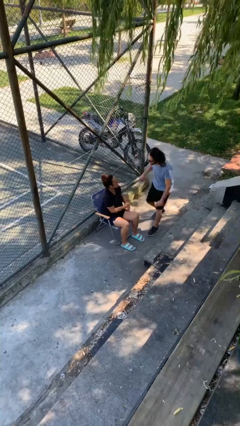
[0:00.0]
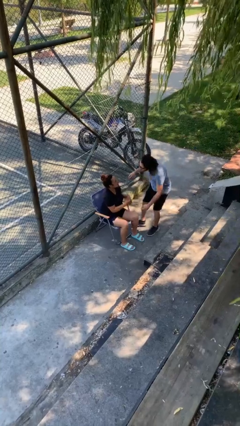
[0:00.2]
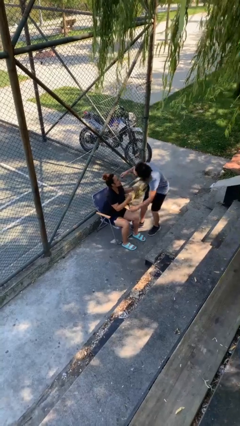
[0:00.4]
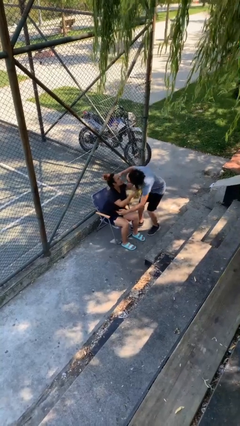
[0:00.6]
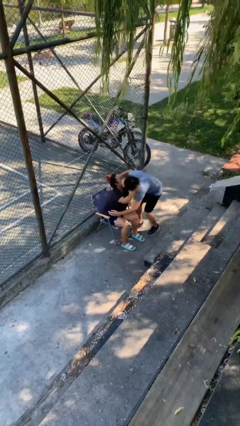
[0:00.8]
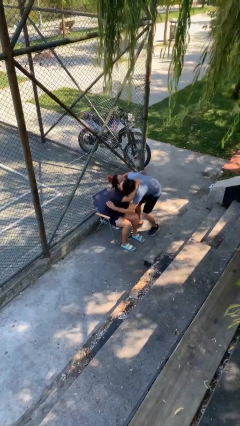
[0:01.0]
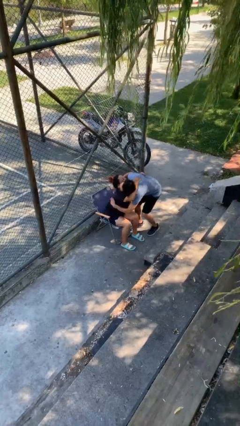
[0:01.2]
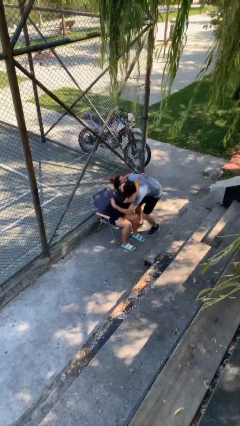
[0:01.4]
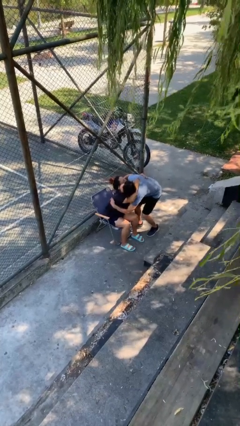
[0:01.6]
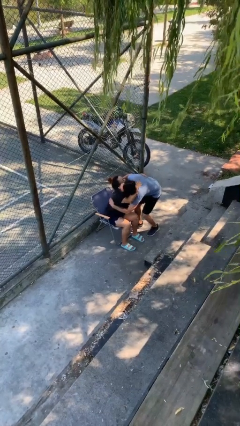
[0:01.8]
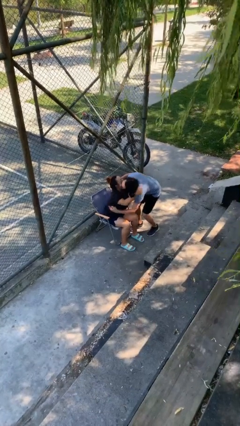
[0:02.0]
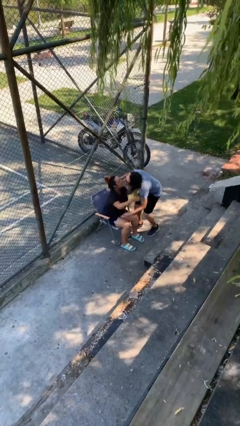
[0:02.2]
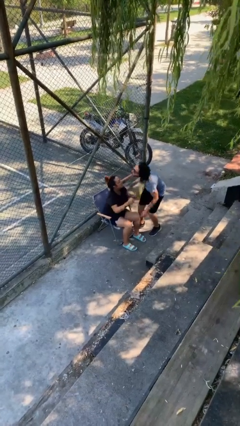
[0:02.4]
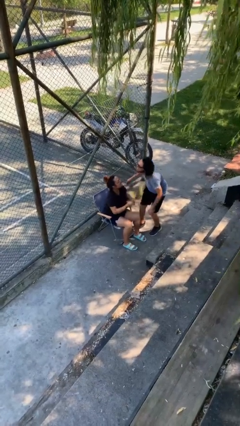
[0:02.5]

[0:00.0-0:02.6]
person embraces person

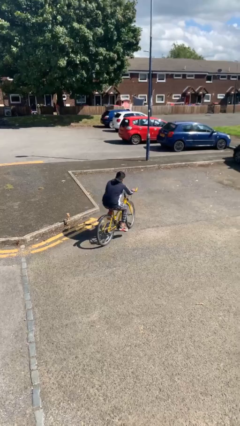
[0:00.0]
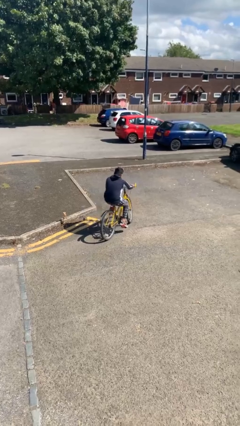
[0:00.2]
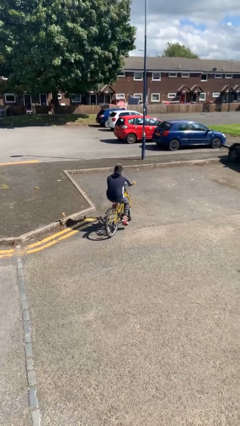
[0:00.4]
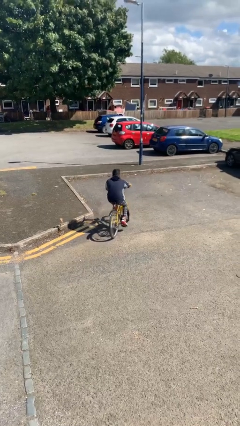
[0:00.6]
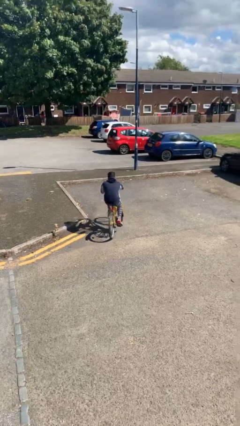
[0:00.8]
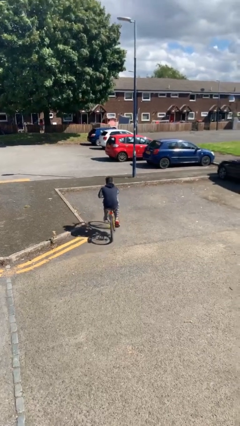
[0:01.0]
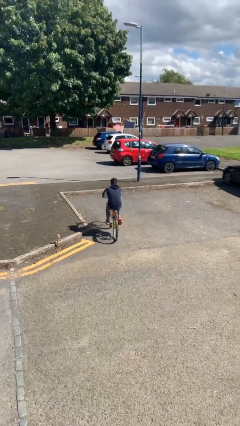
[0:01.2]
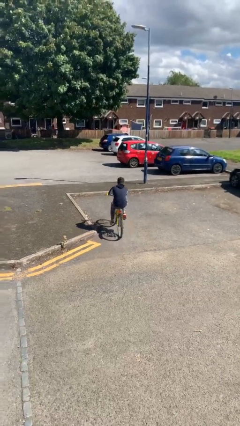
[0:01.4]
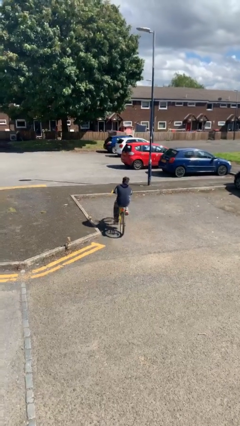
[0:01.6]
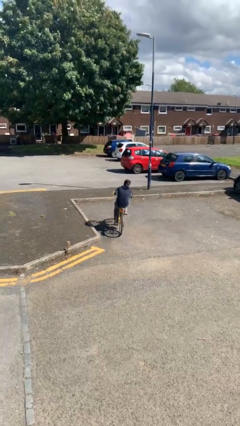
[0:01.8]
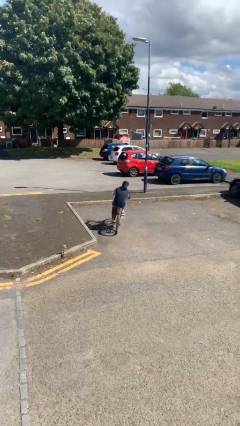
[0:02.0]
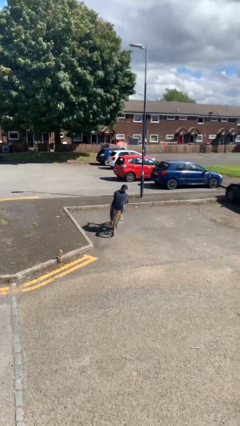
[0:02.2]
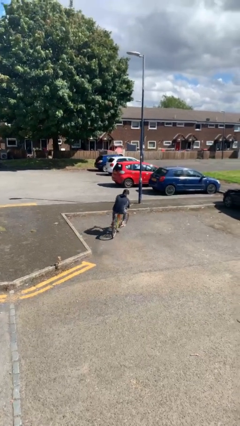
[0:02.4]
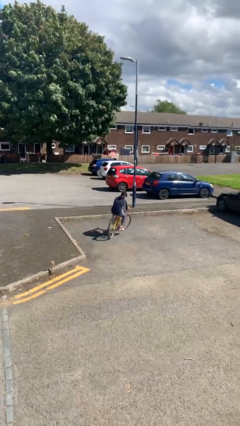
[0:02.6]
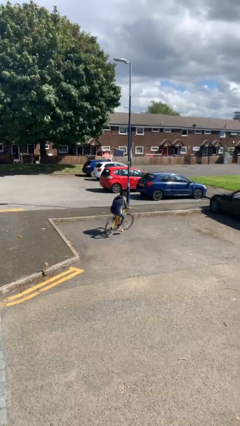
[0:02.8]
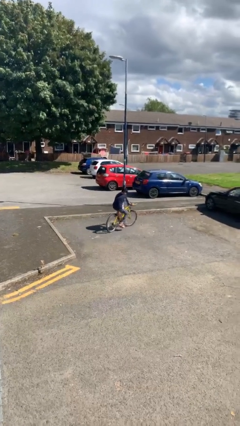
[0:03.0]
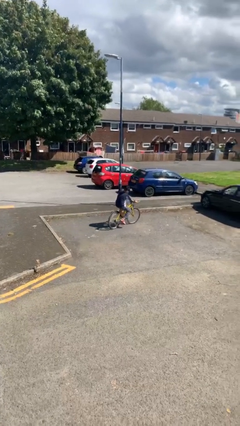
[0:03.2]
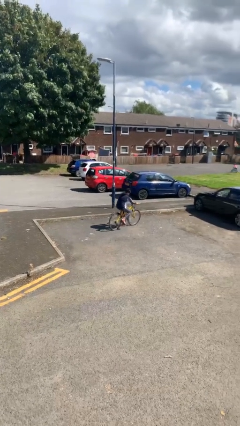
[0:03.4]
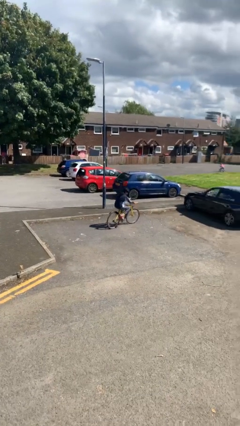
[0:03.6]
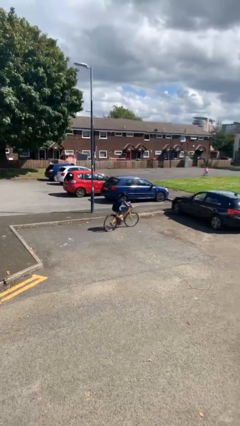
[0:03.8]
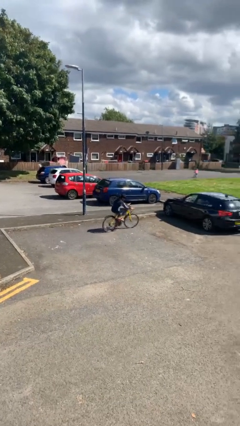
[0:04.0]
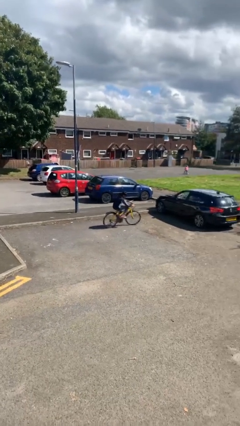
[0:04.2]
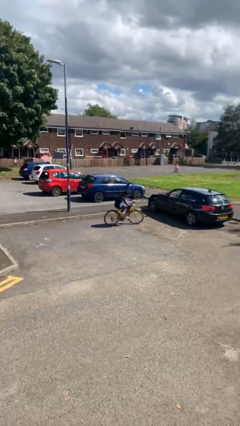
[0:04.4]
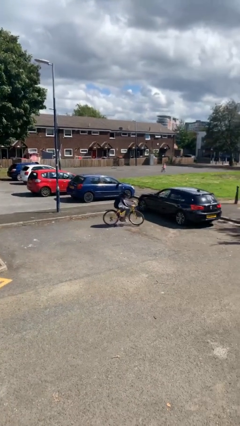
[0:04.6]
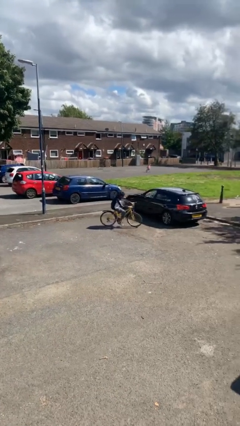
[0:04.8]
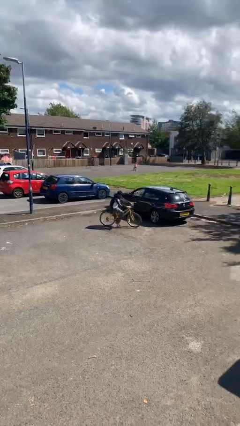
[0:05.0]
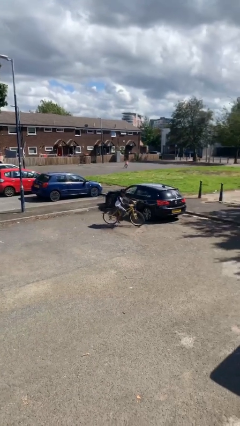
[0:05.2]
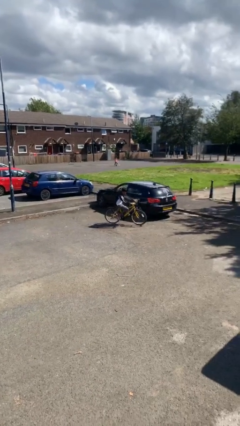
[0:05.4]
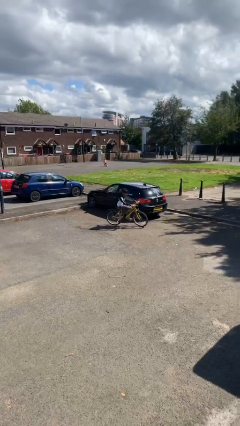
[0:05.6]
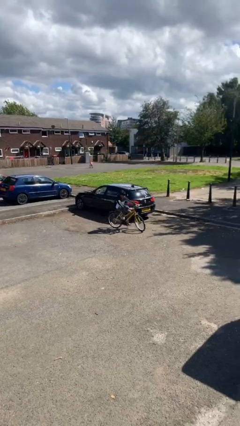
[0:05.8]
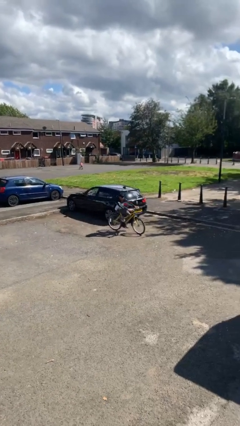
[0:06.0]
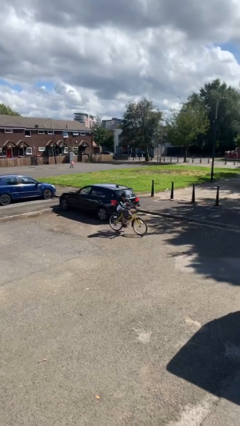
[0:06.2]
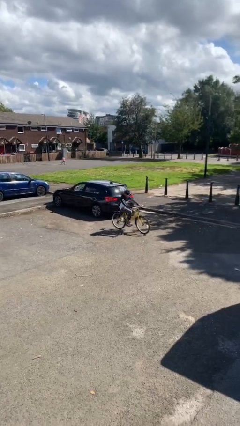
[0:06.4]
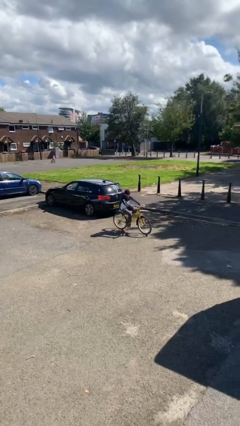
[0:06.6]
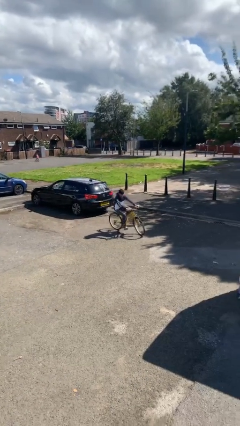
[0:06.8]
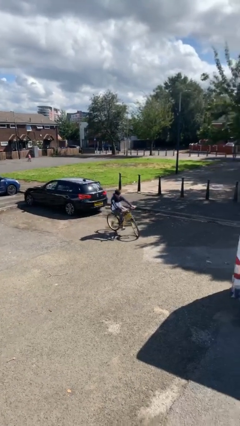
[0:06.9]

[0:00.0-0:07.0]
person rides bicycle

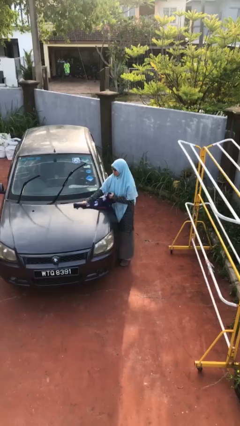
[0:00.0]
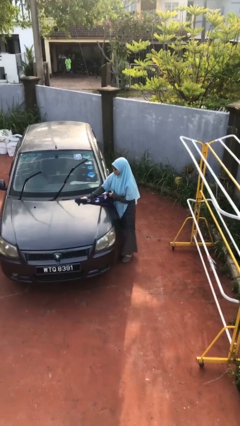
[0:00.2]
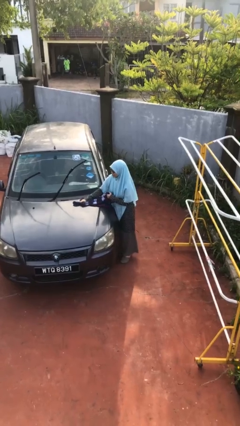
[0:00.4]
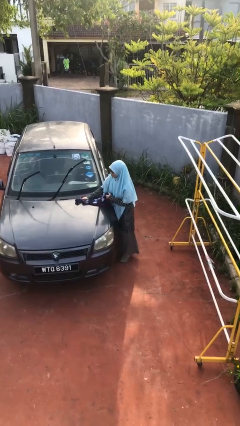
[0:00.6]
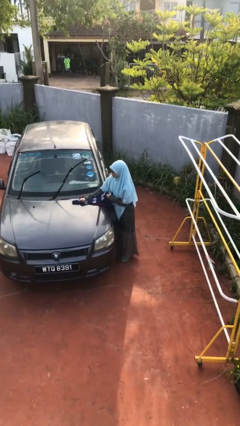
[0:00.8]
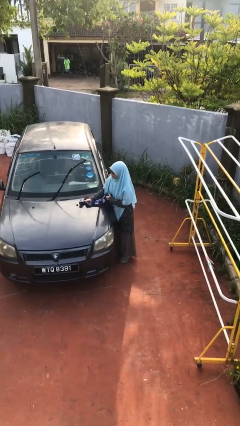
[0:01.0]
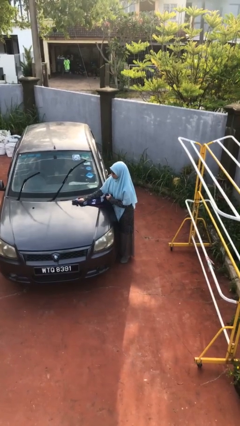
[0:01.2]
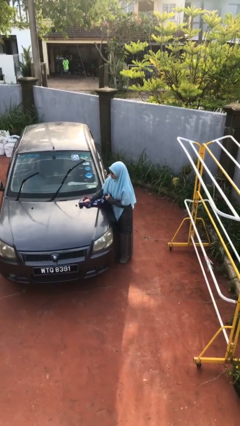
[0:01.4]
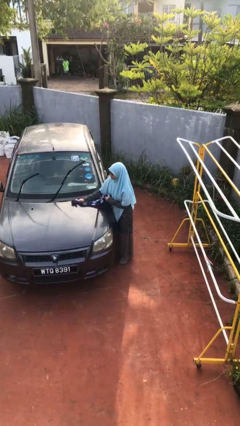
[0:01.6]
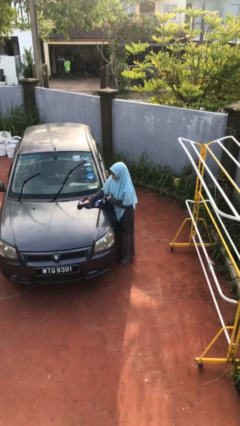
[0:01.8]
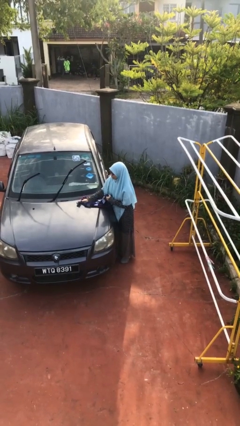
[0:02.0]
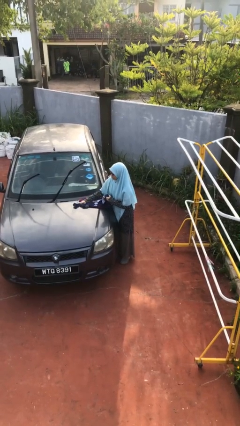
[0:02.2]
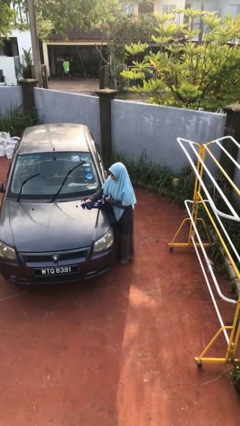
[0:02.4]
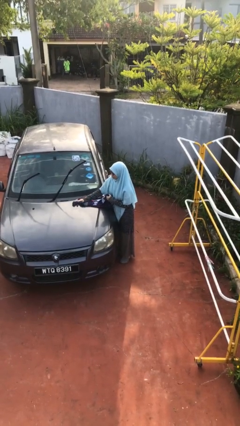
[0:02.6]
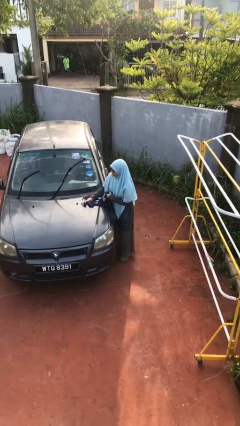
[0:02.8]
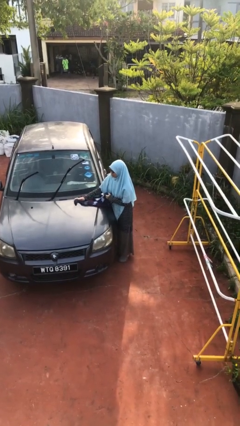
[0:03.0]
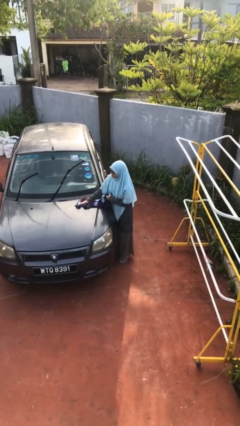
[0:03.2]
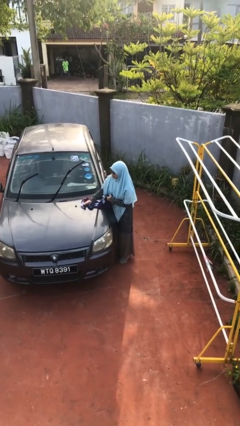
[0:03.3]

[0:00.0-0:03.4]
person polishes car with rag

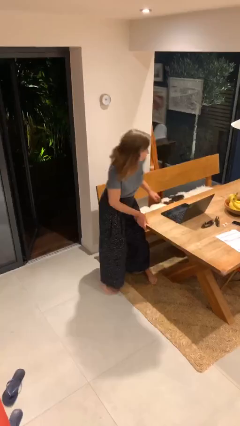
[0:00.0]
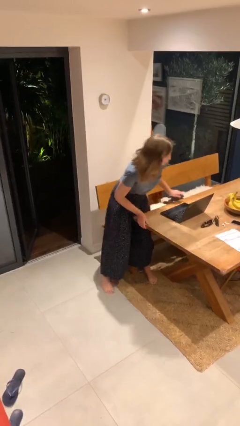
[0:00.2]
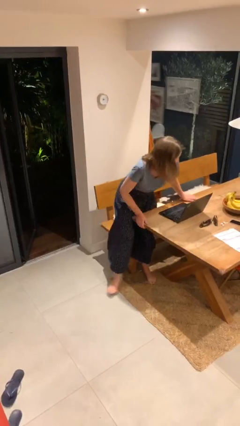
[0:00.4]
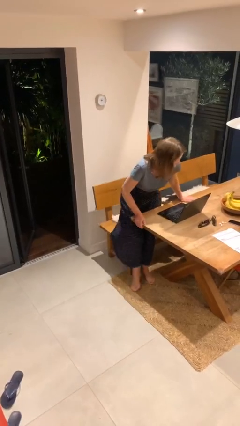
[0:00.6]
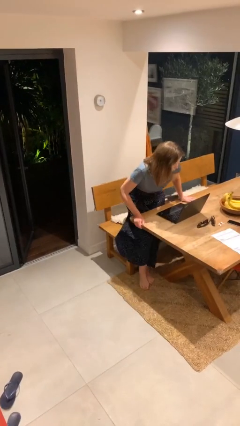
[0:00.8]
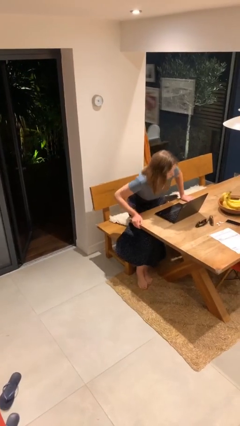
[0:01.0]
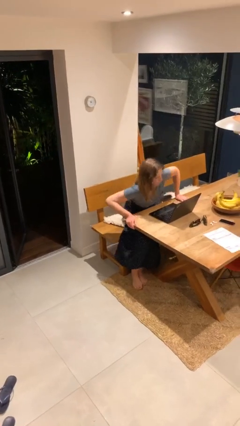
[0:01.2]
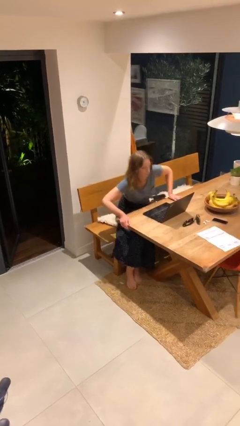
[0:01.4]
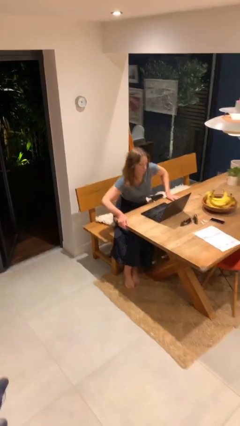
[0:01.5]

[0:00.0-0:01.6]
person sits down

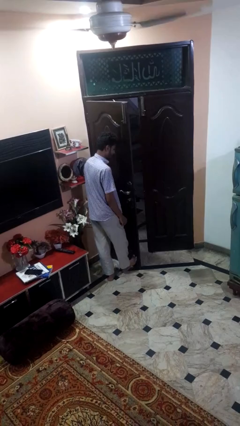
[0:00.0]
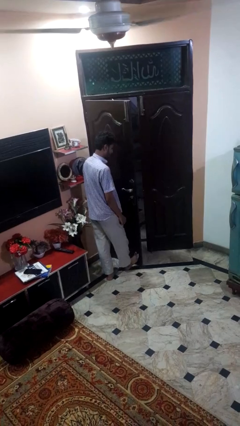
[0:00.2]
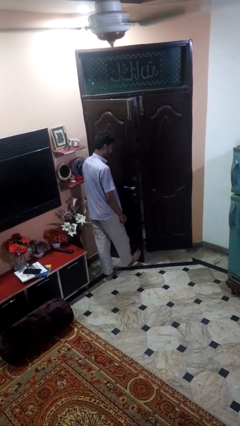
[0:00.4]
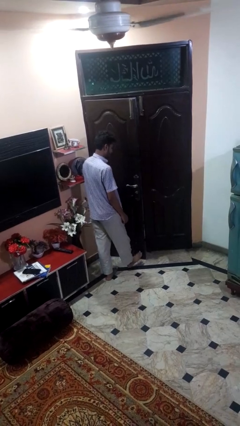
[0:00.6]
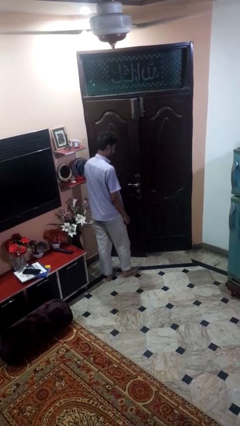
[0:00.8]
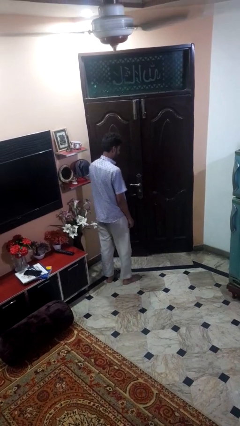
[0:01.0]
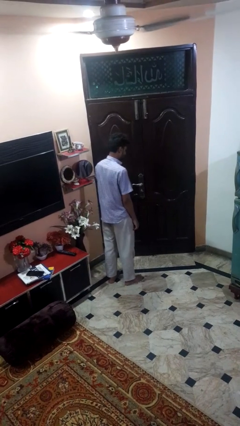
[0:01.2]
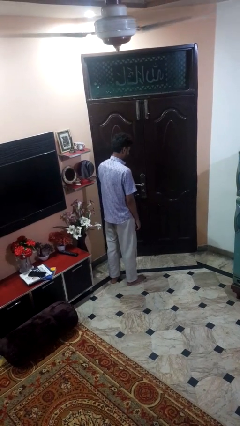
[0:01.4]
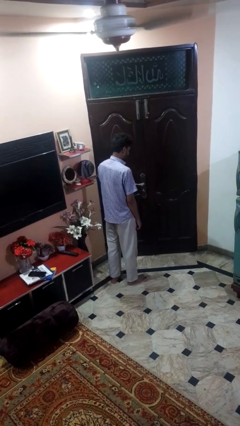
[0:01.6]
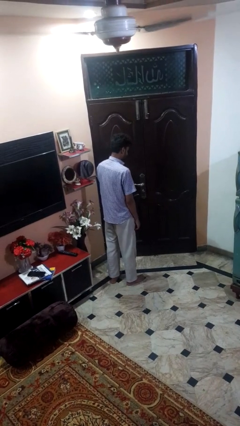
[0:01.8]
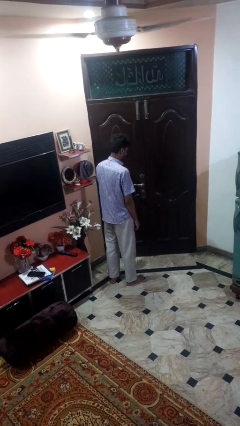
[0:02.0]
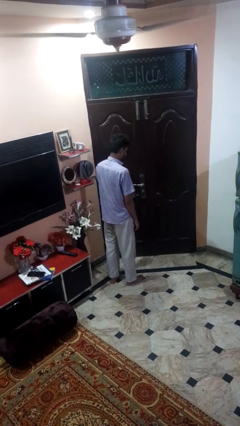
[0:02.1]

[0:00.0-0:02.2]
person closes door with foot

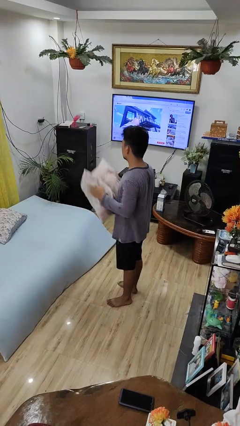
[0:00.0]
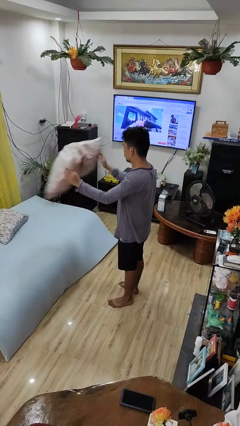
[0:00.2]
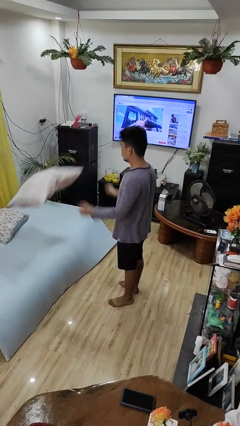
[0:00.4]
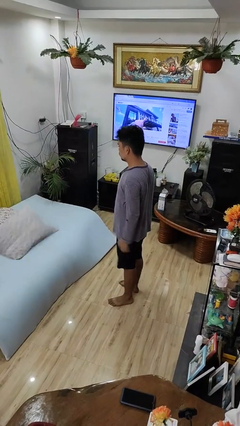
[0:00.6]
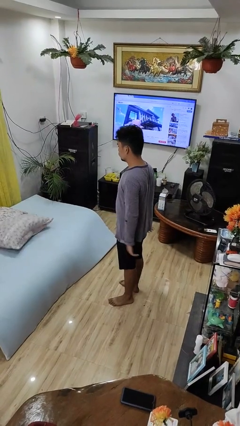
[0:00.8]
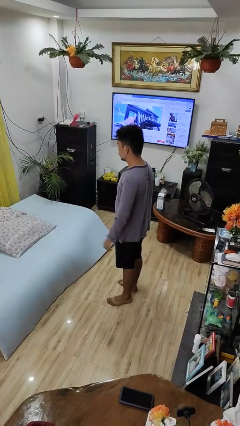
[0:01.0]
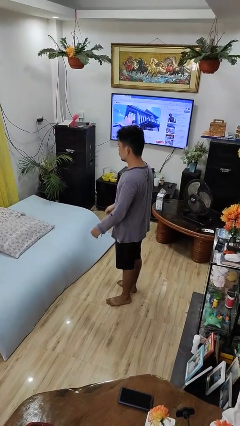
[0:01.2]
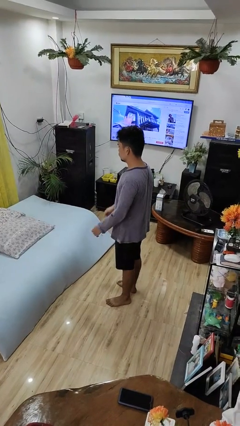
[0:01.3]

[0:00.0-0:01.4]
person throws object on bed
